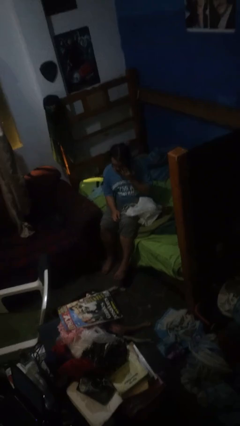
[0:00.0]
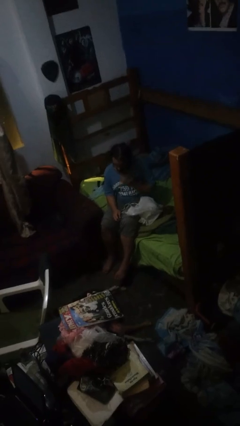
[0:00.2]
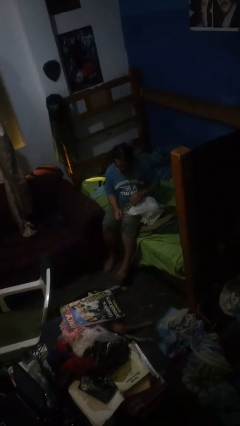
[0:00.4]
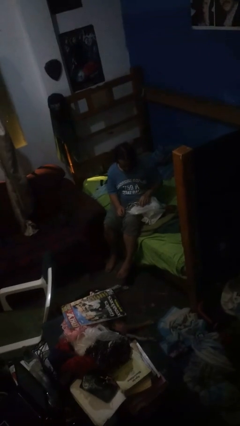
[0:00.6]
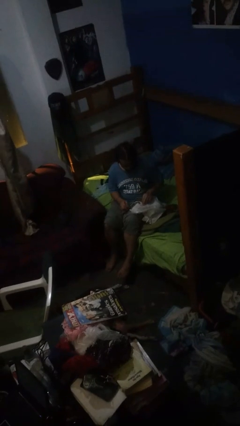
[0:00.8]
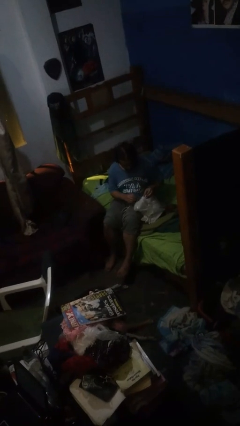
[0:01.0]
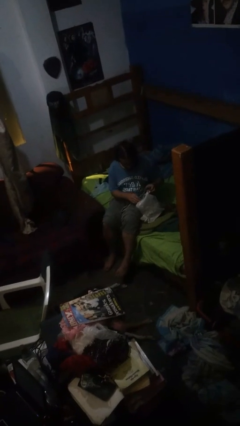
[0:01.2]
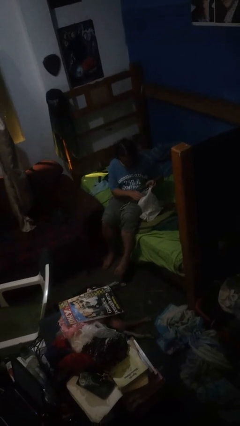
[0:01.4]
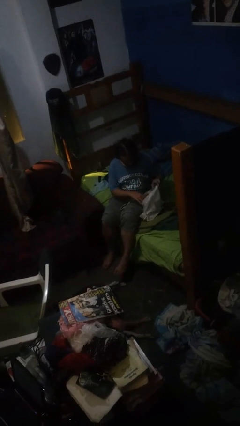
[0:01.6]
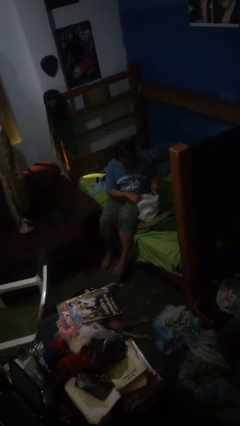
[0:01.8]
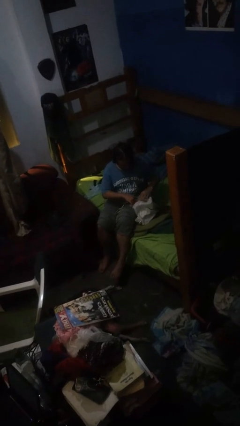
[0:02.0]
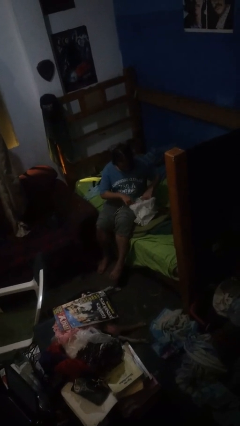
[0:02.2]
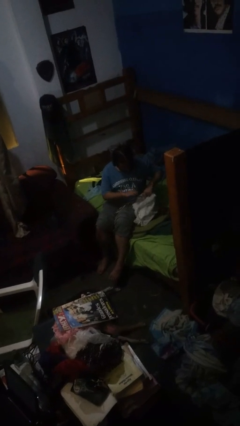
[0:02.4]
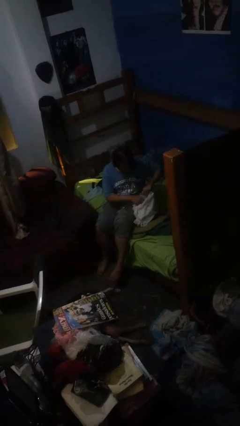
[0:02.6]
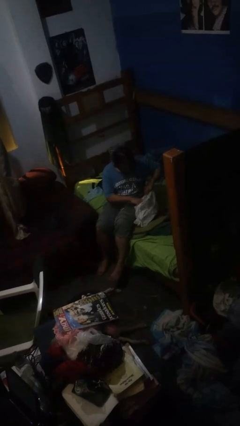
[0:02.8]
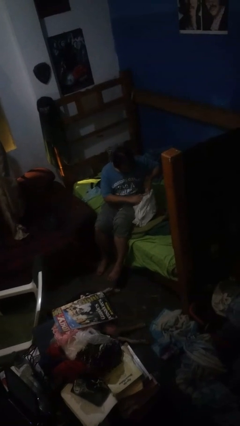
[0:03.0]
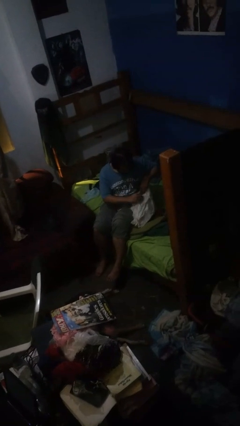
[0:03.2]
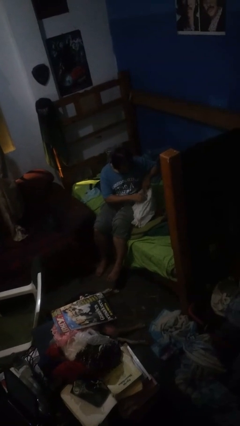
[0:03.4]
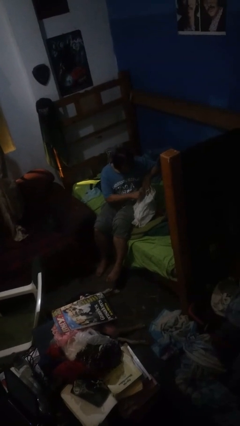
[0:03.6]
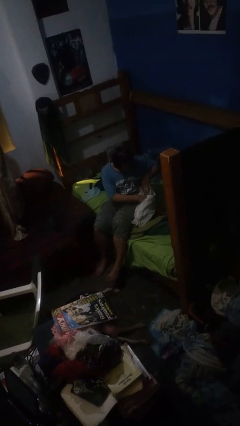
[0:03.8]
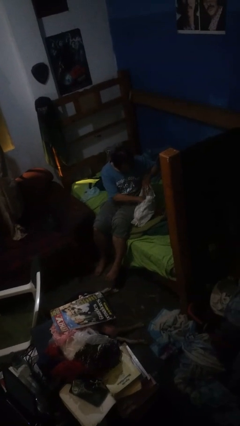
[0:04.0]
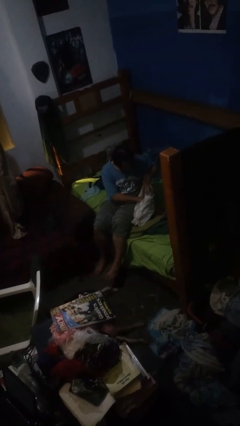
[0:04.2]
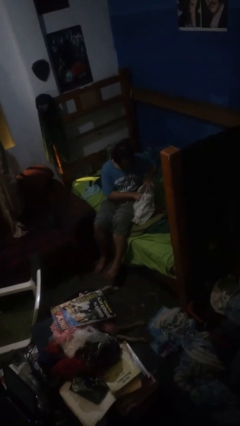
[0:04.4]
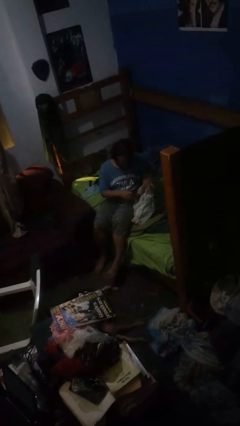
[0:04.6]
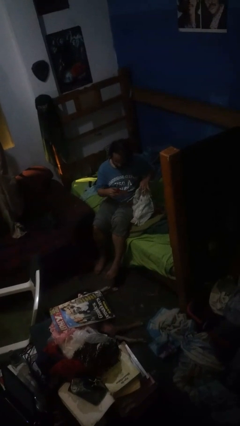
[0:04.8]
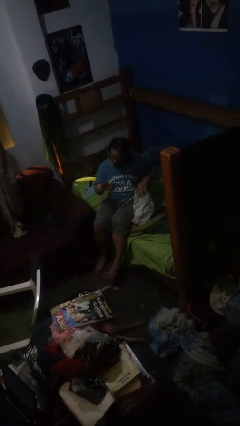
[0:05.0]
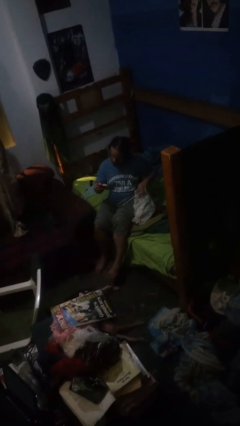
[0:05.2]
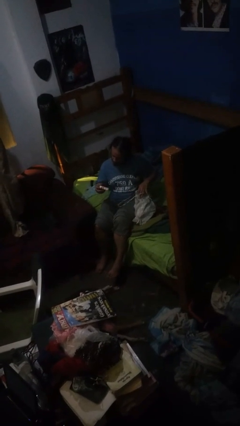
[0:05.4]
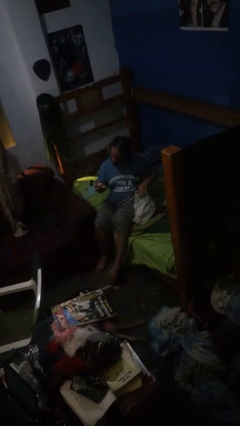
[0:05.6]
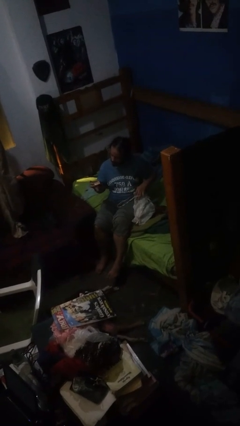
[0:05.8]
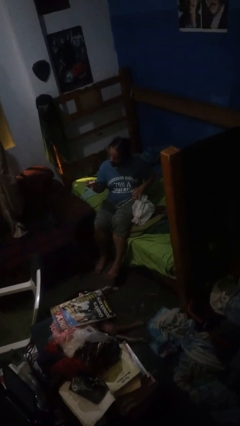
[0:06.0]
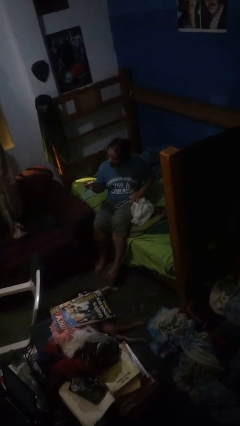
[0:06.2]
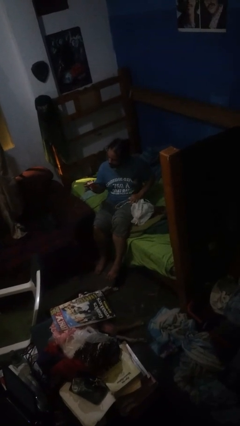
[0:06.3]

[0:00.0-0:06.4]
person takes object from bag

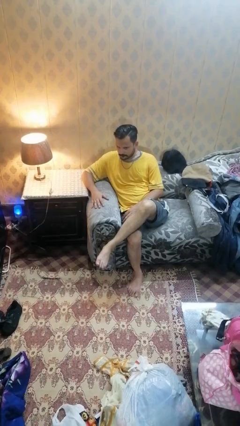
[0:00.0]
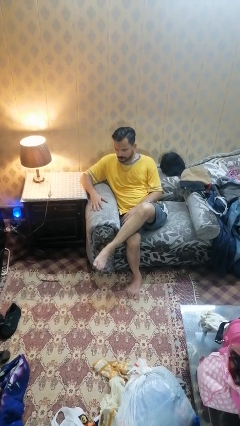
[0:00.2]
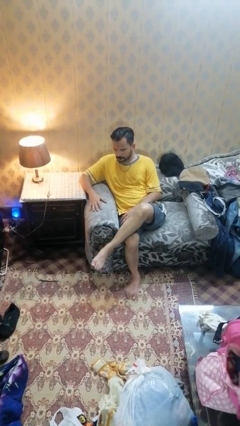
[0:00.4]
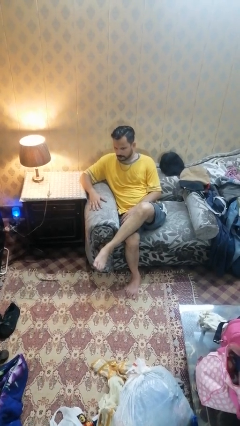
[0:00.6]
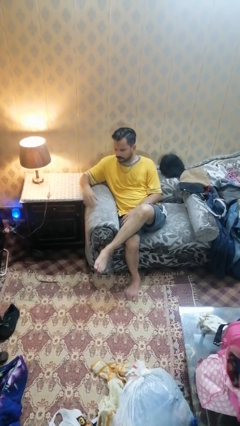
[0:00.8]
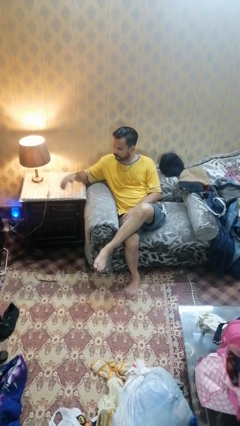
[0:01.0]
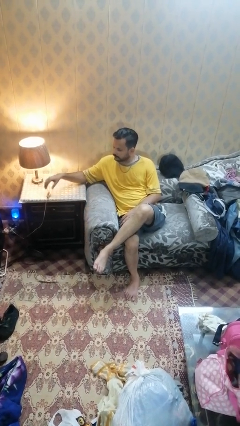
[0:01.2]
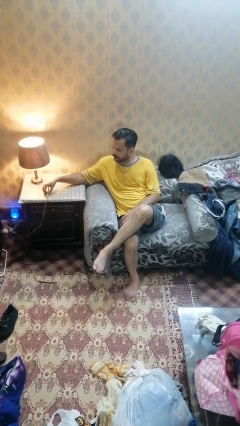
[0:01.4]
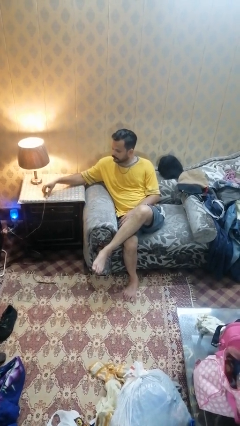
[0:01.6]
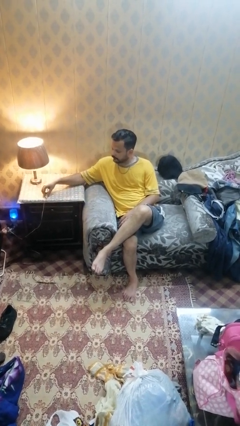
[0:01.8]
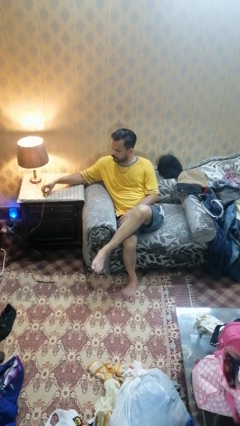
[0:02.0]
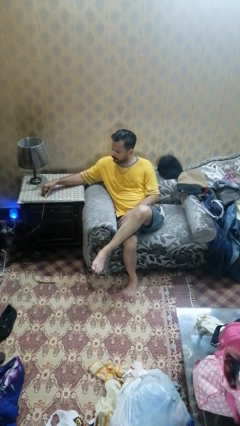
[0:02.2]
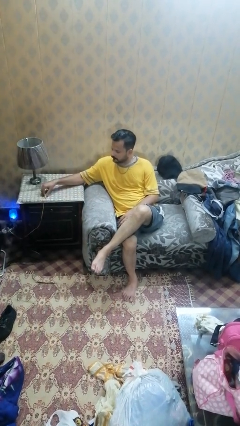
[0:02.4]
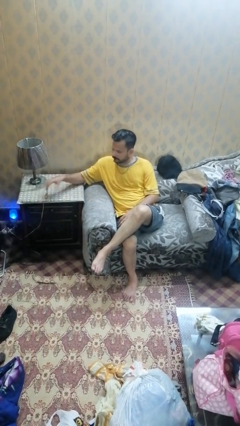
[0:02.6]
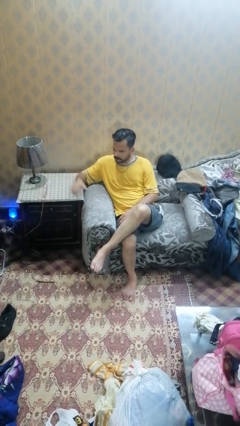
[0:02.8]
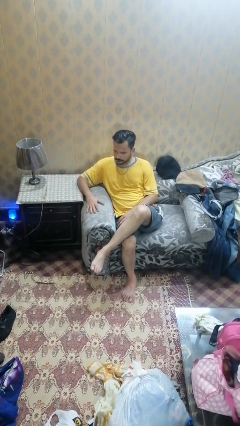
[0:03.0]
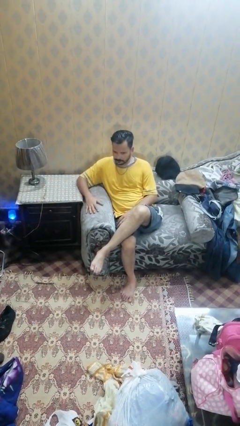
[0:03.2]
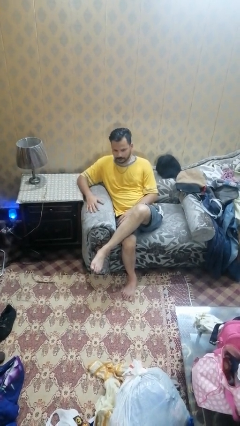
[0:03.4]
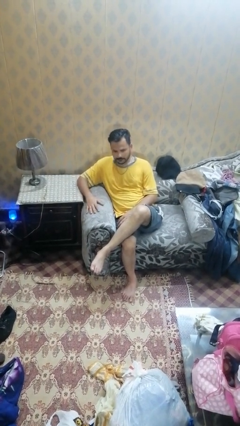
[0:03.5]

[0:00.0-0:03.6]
person turns off lamp

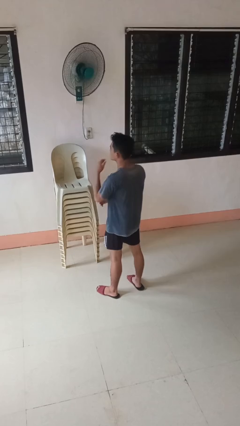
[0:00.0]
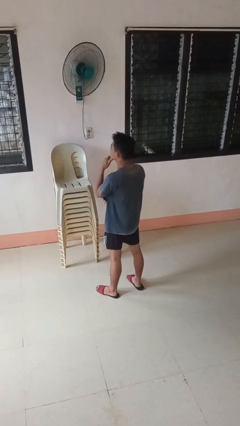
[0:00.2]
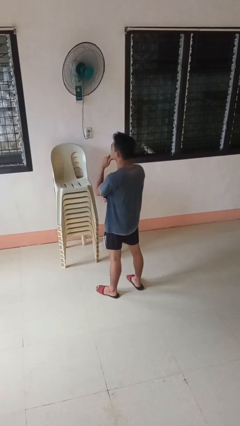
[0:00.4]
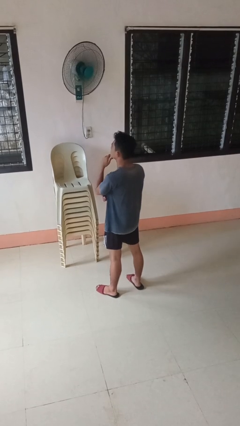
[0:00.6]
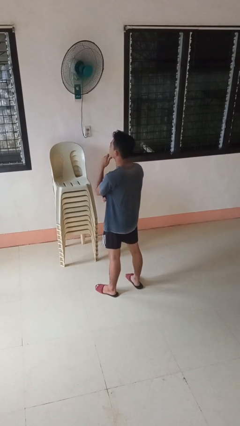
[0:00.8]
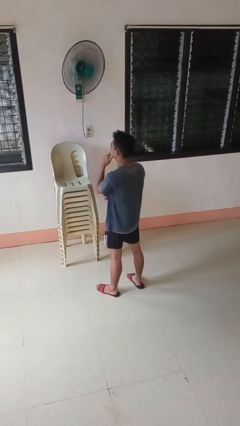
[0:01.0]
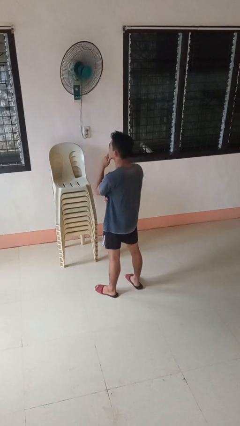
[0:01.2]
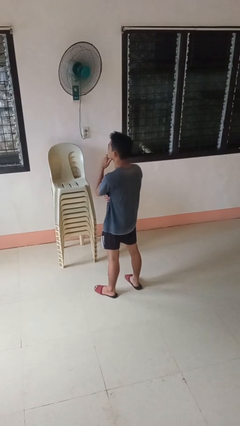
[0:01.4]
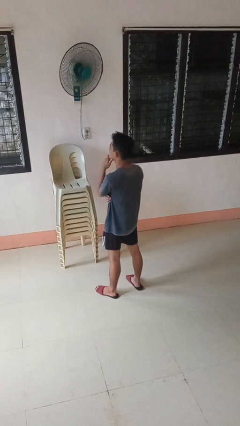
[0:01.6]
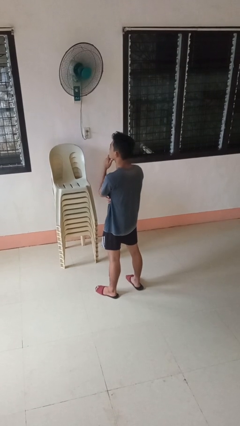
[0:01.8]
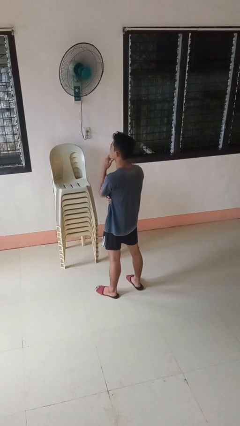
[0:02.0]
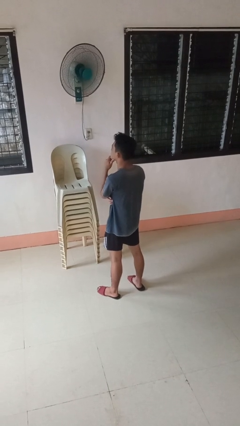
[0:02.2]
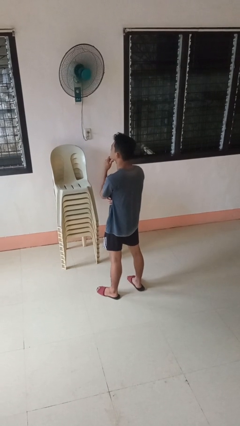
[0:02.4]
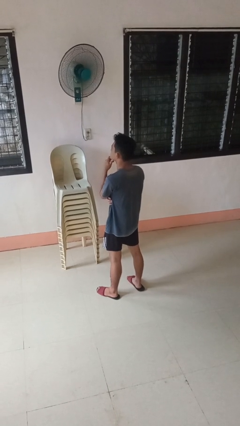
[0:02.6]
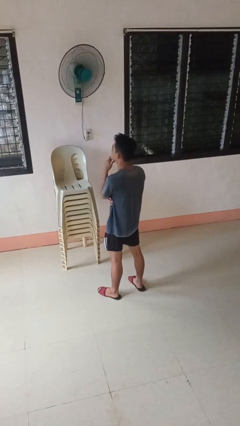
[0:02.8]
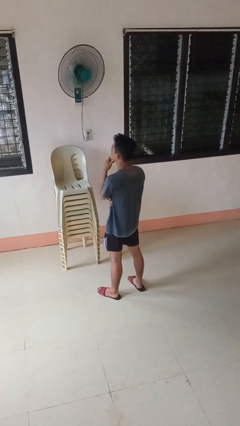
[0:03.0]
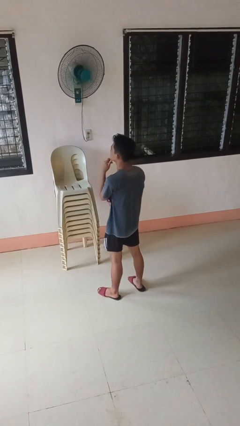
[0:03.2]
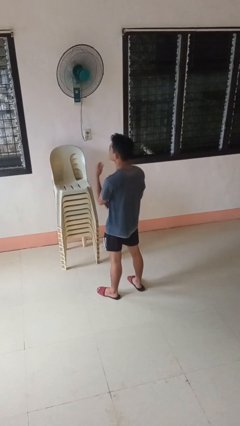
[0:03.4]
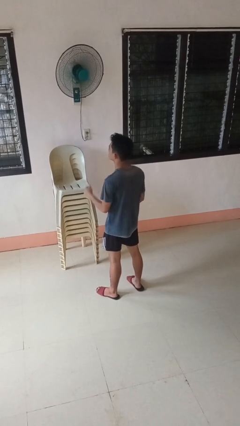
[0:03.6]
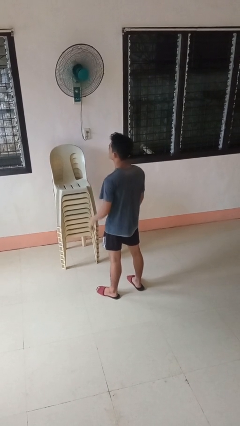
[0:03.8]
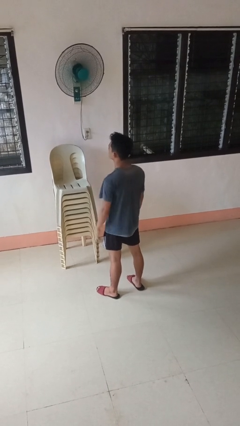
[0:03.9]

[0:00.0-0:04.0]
person strokes chin

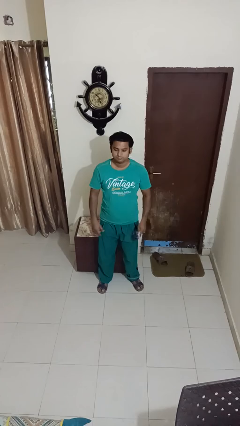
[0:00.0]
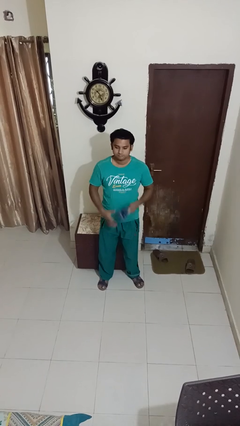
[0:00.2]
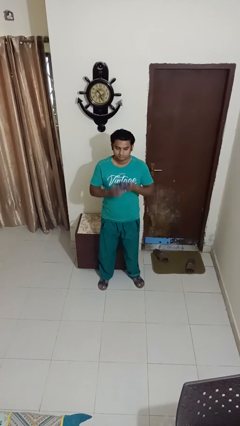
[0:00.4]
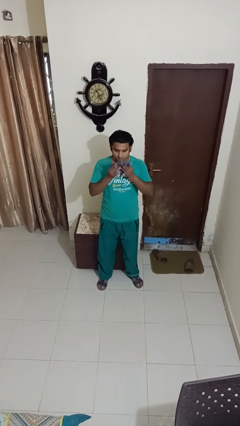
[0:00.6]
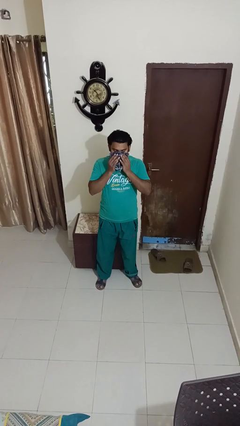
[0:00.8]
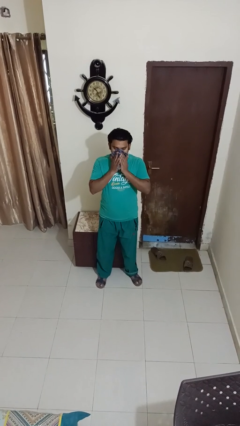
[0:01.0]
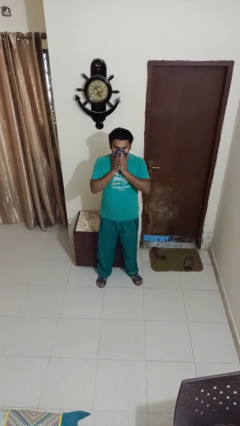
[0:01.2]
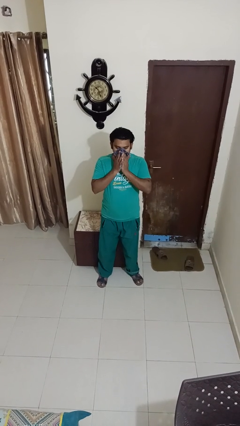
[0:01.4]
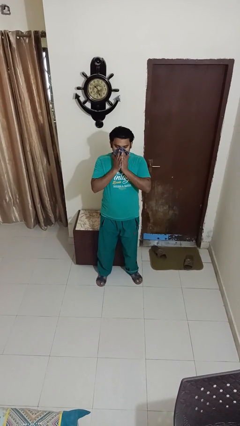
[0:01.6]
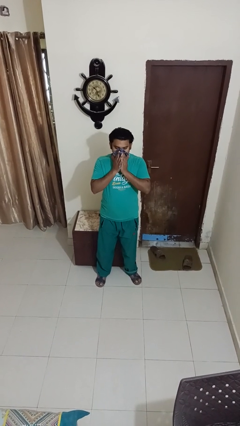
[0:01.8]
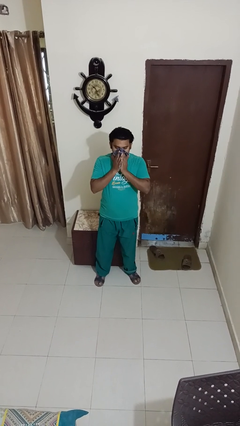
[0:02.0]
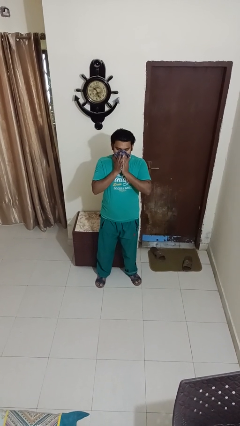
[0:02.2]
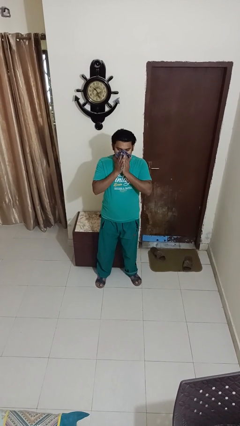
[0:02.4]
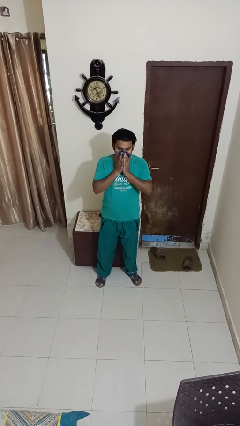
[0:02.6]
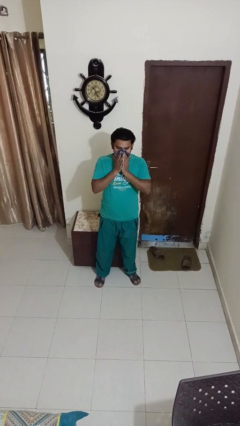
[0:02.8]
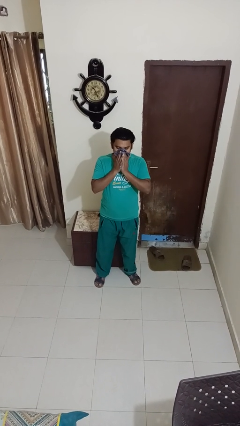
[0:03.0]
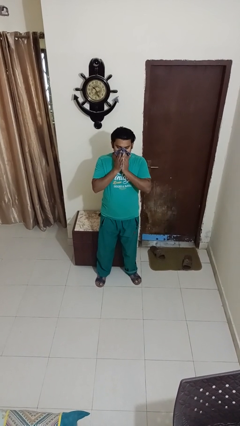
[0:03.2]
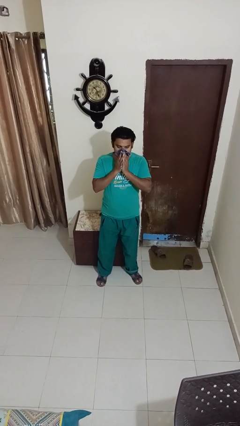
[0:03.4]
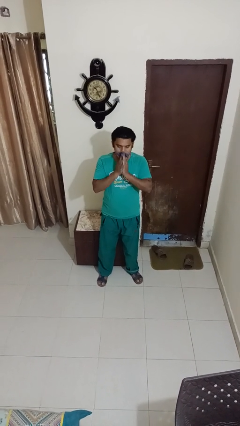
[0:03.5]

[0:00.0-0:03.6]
person blows nose
